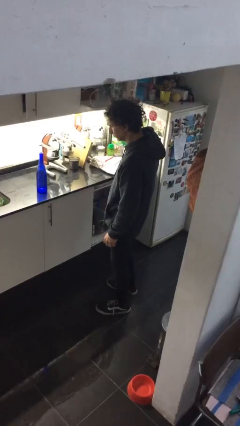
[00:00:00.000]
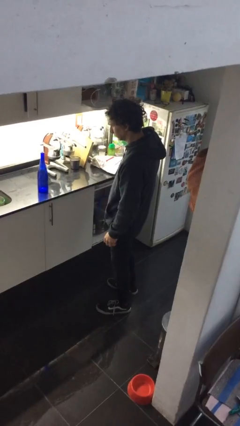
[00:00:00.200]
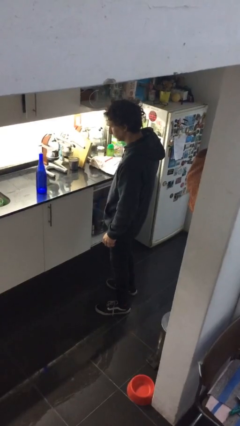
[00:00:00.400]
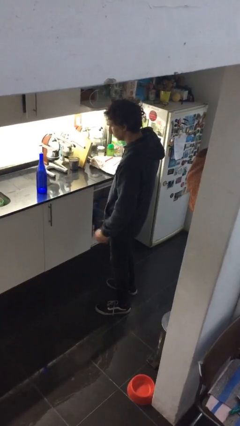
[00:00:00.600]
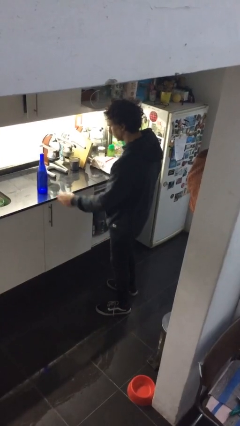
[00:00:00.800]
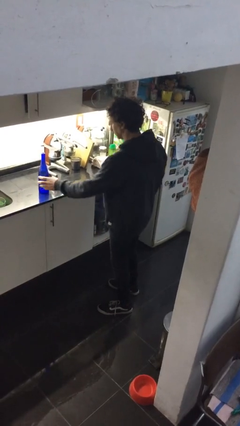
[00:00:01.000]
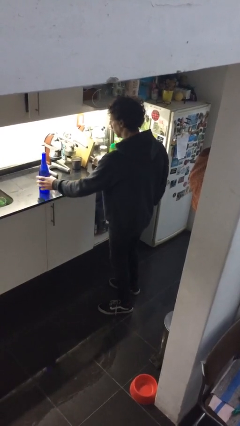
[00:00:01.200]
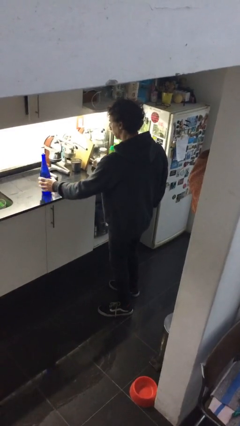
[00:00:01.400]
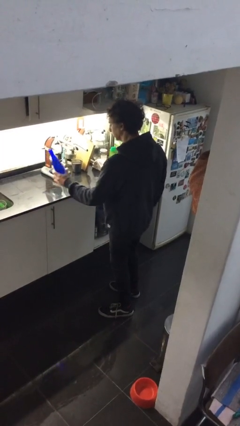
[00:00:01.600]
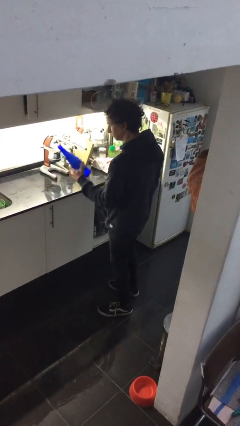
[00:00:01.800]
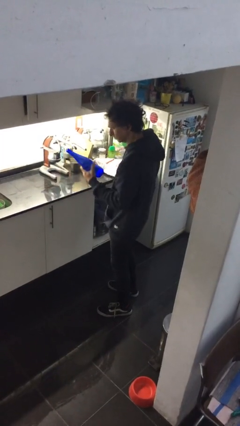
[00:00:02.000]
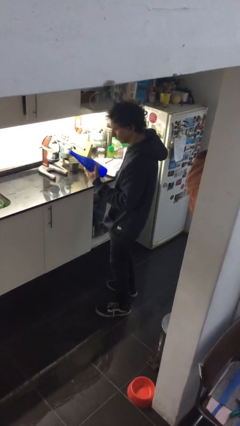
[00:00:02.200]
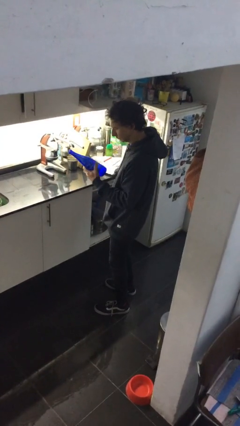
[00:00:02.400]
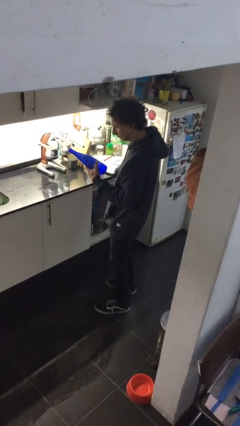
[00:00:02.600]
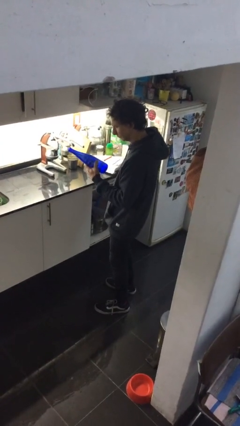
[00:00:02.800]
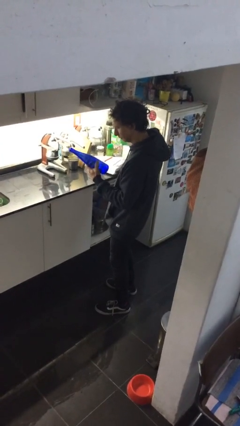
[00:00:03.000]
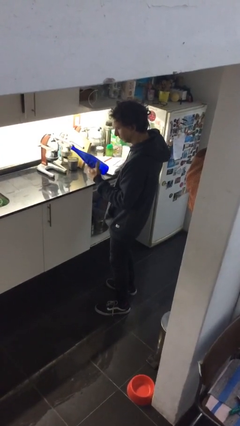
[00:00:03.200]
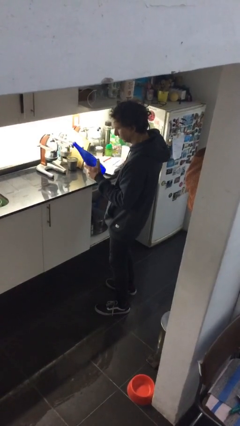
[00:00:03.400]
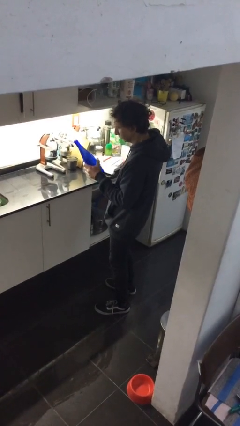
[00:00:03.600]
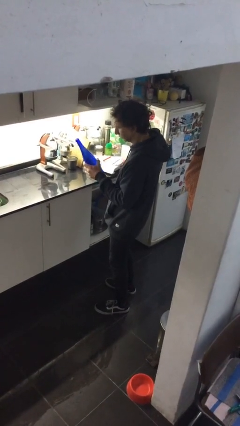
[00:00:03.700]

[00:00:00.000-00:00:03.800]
person picks up object from countertop

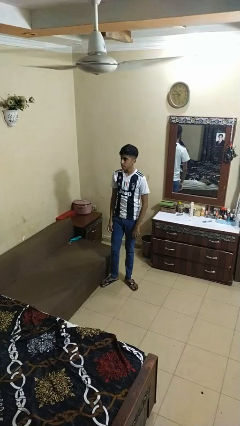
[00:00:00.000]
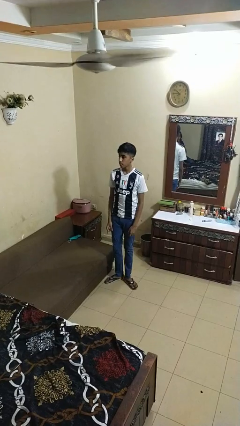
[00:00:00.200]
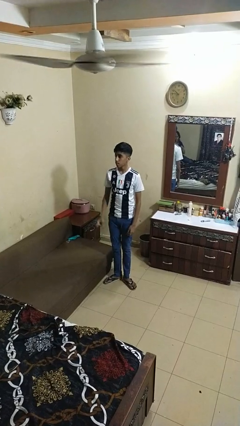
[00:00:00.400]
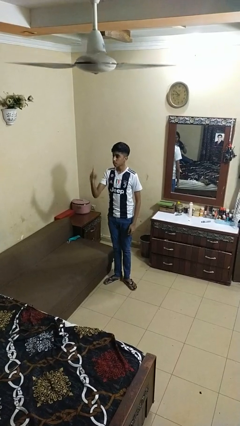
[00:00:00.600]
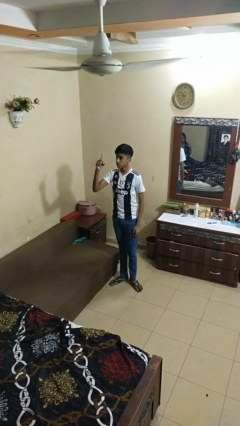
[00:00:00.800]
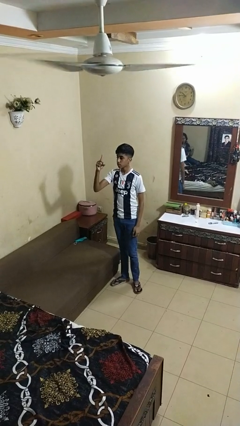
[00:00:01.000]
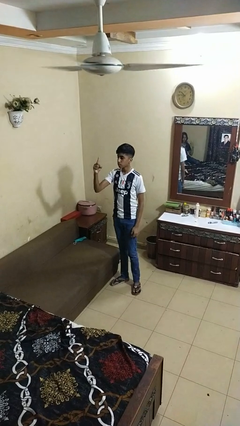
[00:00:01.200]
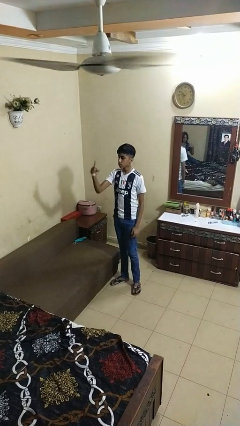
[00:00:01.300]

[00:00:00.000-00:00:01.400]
person gestures number one

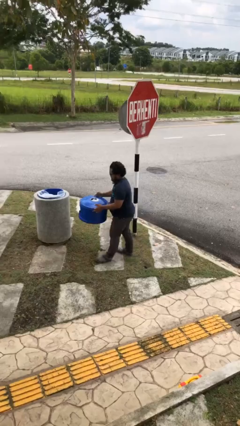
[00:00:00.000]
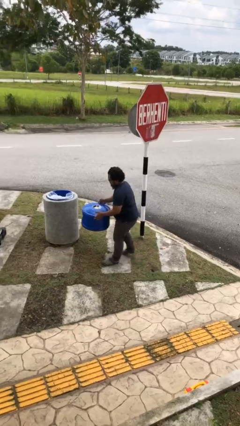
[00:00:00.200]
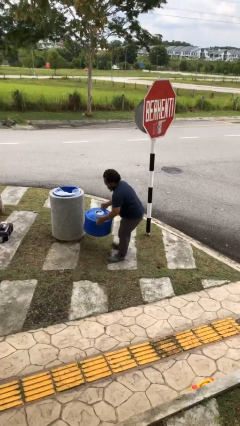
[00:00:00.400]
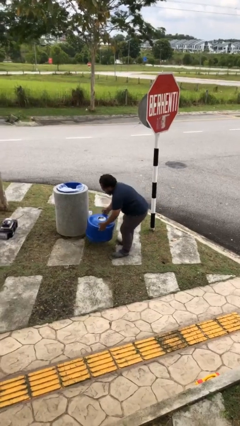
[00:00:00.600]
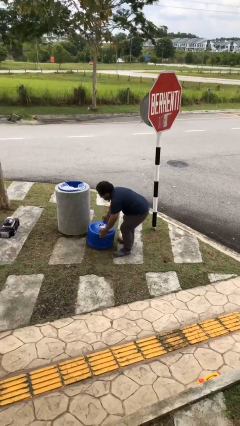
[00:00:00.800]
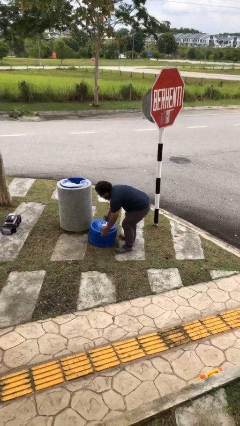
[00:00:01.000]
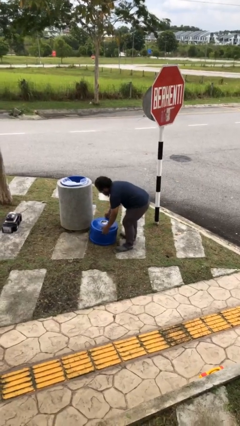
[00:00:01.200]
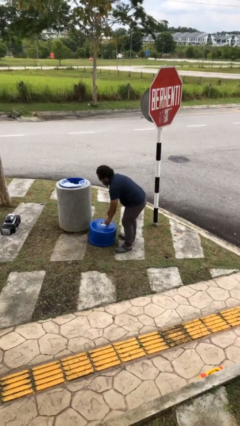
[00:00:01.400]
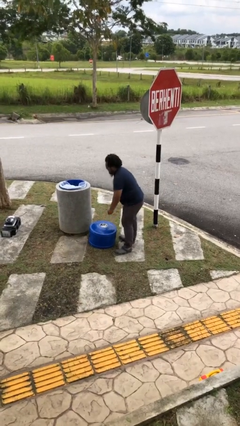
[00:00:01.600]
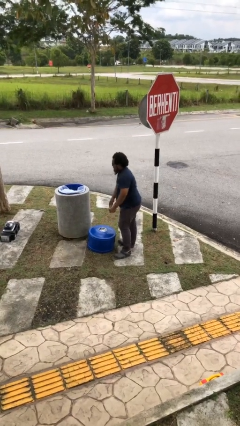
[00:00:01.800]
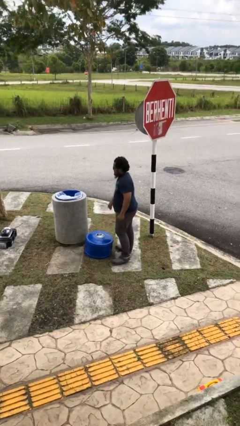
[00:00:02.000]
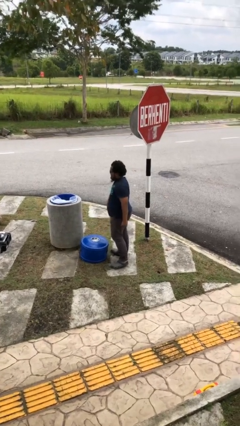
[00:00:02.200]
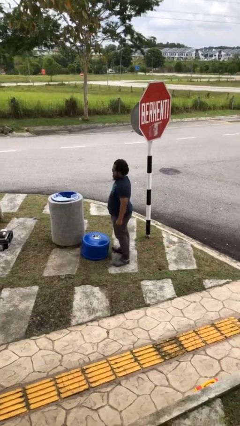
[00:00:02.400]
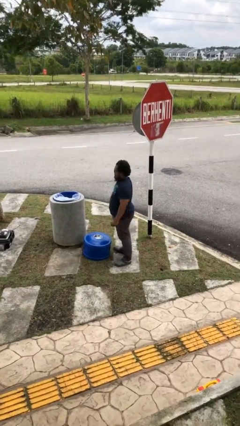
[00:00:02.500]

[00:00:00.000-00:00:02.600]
person puts down object on floor

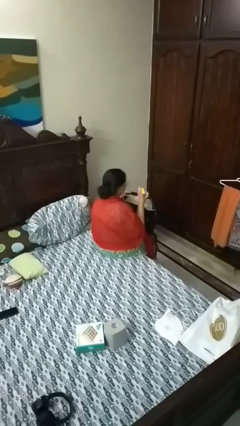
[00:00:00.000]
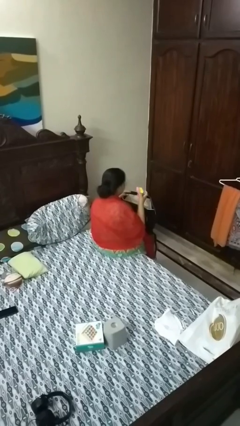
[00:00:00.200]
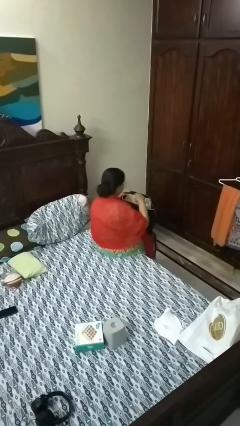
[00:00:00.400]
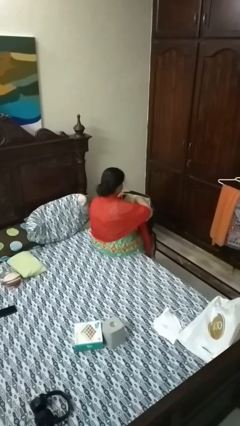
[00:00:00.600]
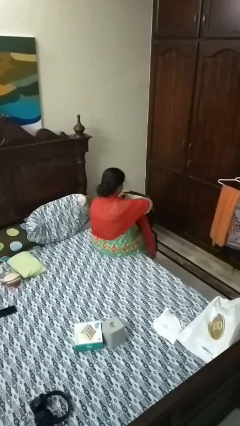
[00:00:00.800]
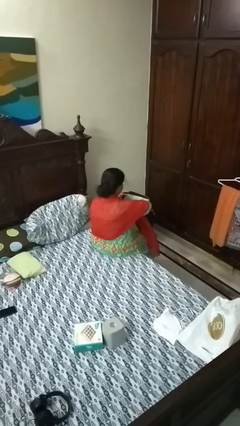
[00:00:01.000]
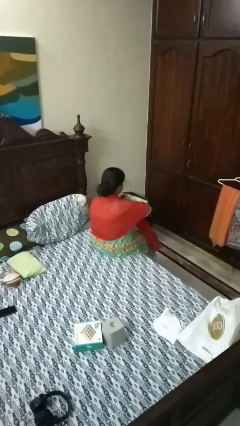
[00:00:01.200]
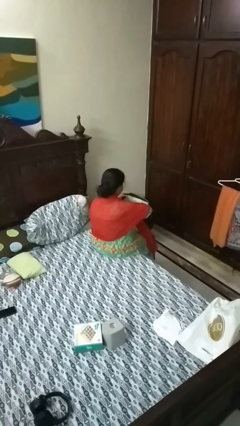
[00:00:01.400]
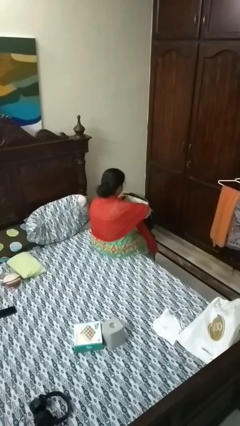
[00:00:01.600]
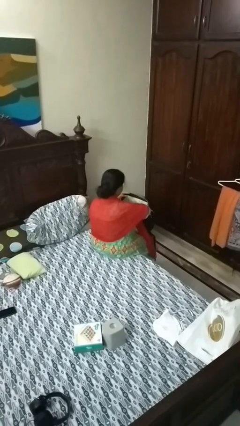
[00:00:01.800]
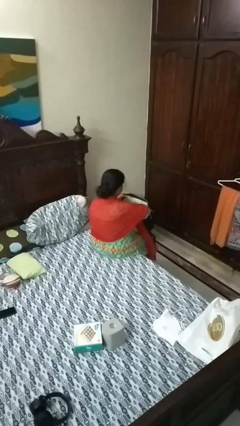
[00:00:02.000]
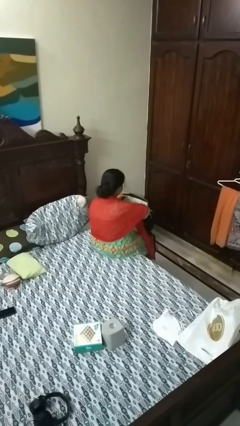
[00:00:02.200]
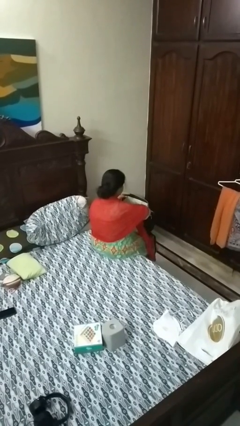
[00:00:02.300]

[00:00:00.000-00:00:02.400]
person puts object into backpack

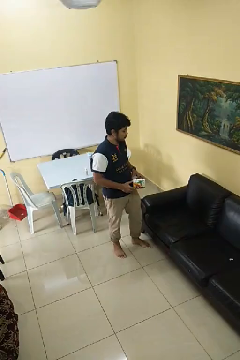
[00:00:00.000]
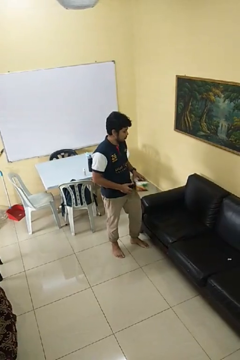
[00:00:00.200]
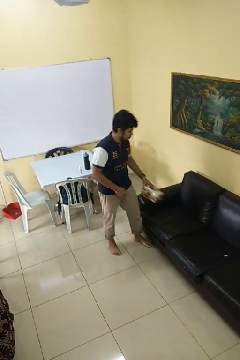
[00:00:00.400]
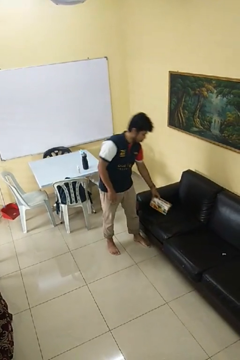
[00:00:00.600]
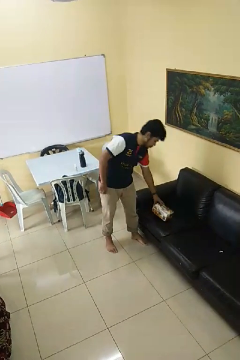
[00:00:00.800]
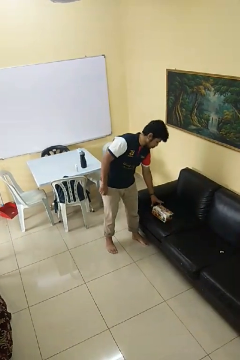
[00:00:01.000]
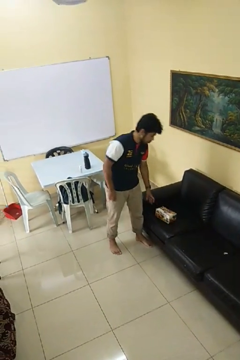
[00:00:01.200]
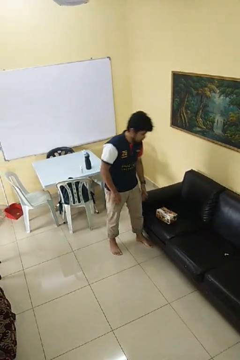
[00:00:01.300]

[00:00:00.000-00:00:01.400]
person puts down object on couch

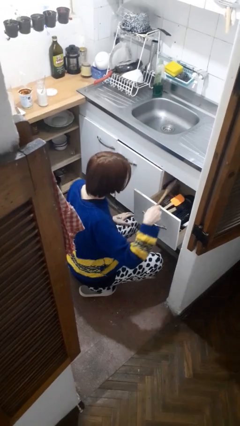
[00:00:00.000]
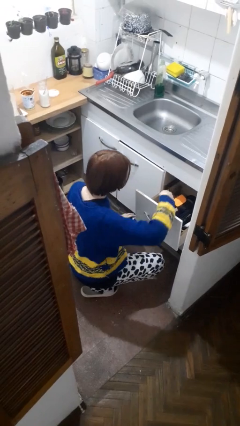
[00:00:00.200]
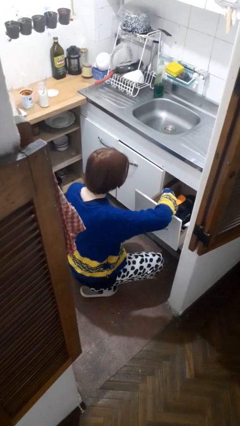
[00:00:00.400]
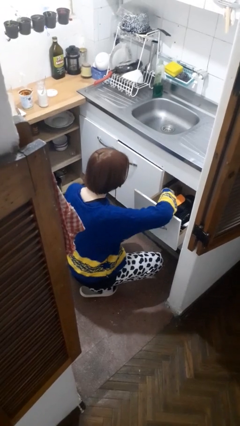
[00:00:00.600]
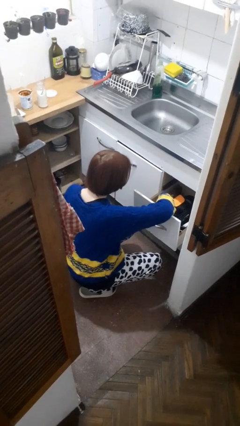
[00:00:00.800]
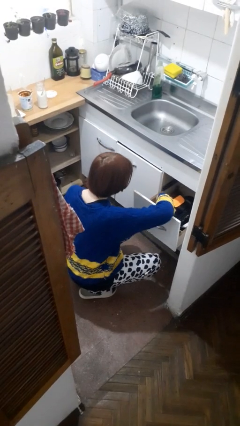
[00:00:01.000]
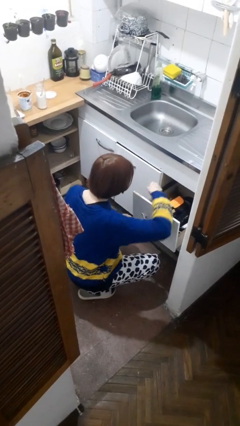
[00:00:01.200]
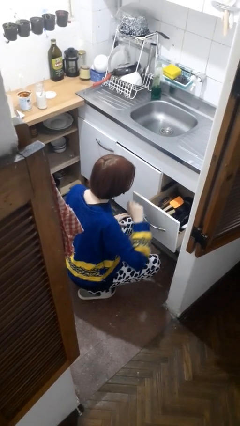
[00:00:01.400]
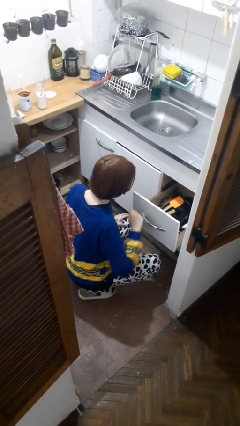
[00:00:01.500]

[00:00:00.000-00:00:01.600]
person puts object into kitchen drawer

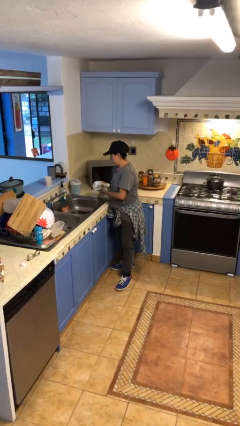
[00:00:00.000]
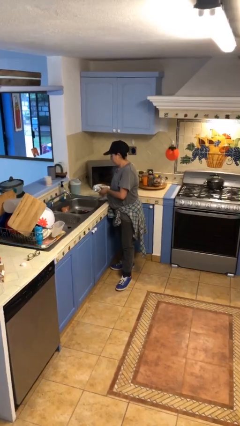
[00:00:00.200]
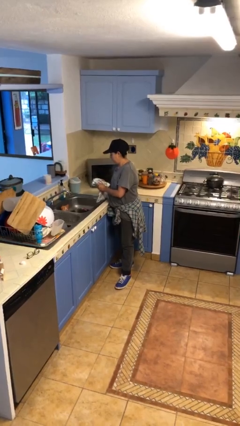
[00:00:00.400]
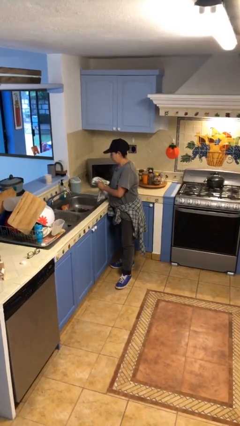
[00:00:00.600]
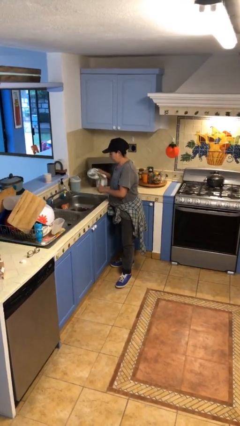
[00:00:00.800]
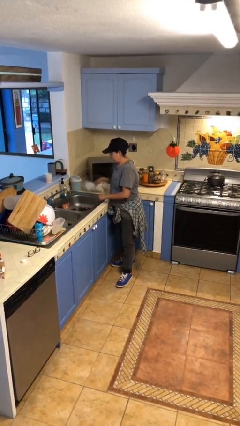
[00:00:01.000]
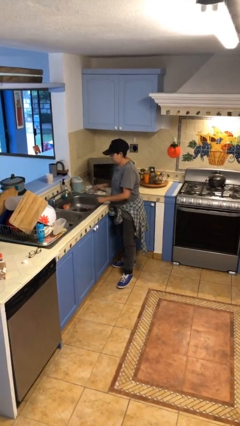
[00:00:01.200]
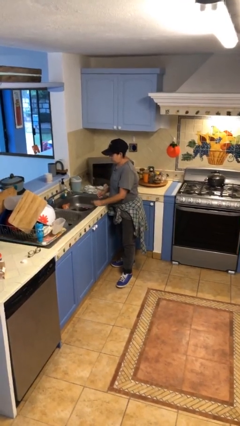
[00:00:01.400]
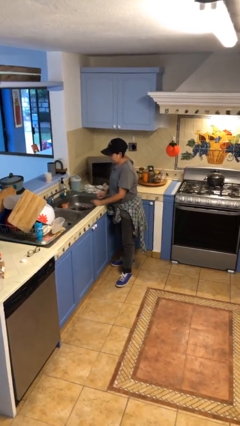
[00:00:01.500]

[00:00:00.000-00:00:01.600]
person dries hands with towel

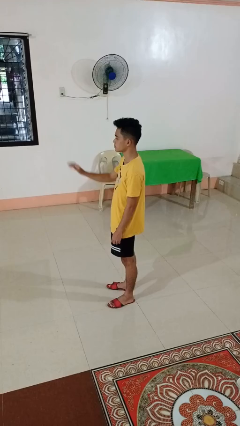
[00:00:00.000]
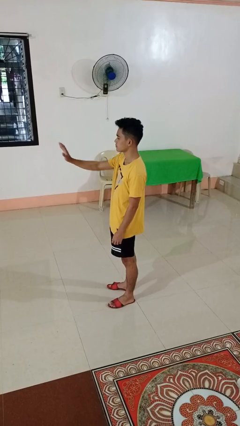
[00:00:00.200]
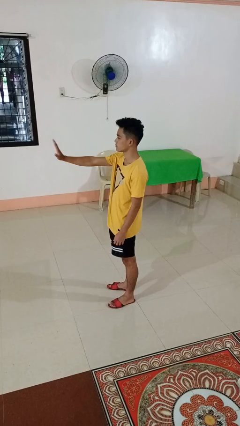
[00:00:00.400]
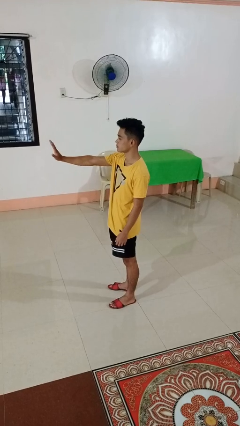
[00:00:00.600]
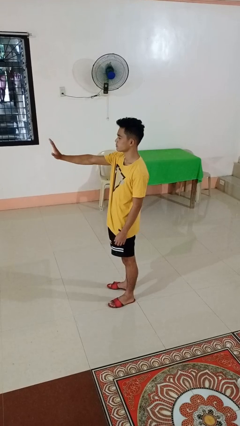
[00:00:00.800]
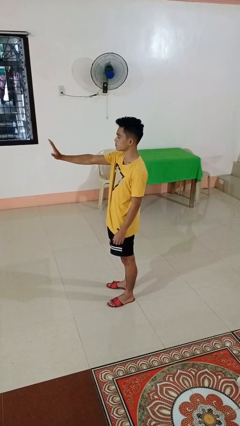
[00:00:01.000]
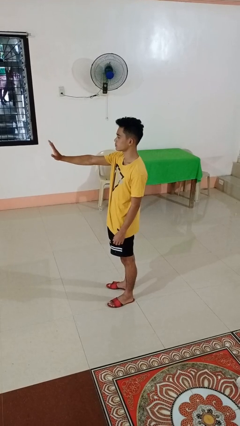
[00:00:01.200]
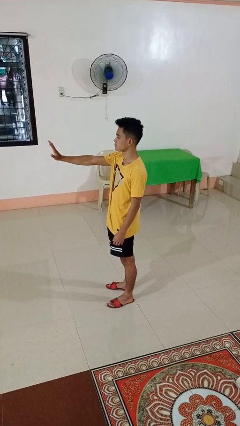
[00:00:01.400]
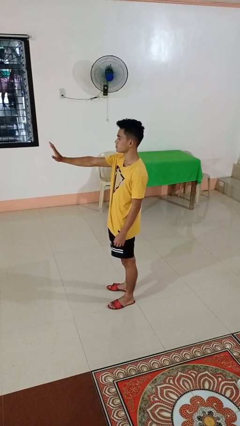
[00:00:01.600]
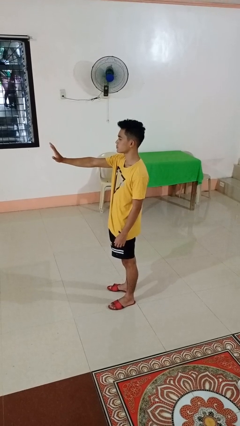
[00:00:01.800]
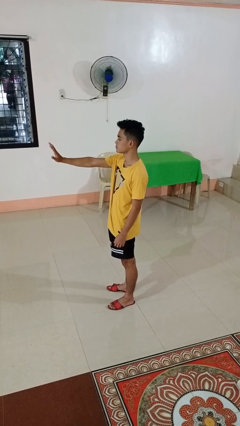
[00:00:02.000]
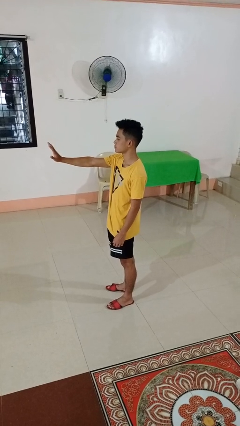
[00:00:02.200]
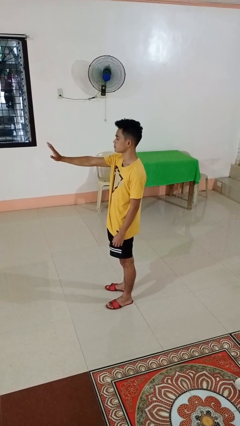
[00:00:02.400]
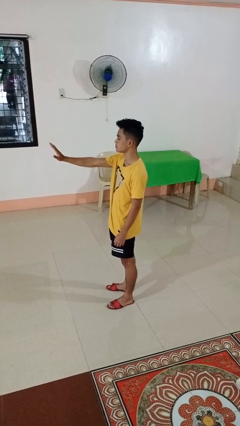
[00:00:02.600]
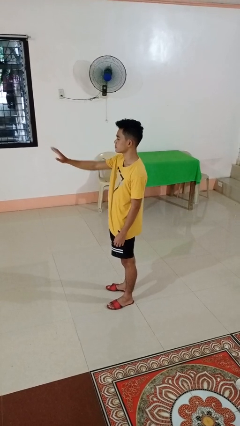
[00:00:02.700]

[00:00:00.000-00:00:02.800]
person gestures stop
